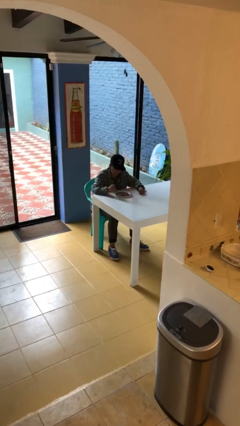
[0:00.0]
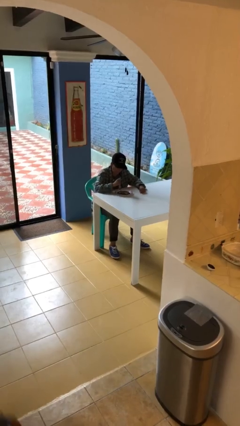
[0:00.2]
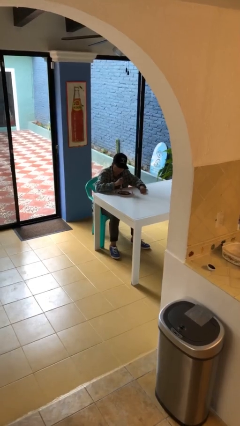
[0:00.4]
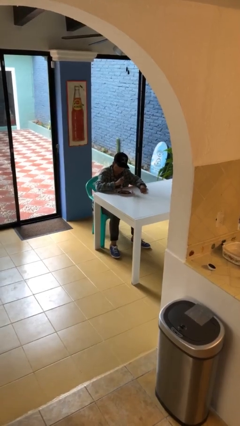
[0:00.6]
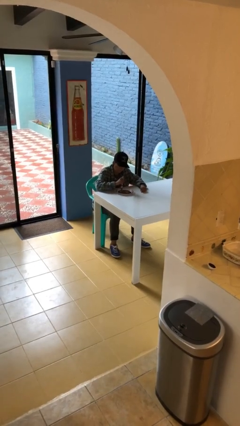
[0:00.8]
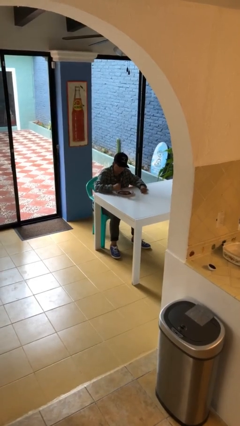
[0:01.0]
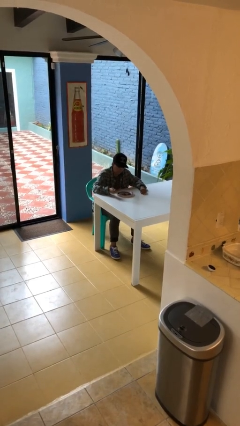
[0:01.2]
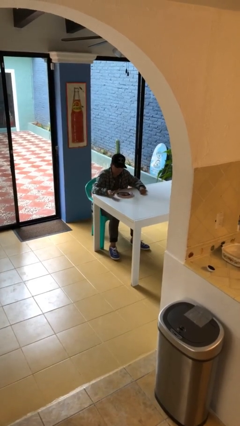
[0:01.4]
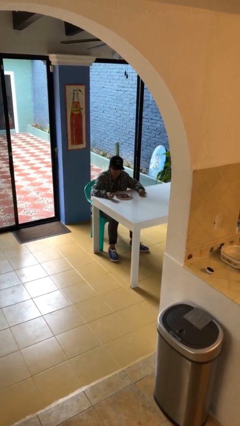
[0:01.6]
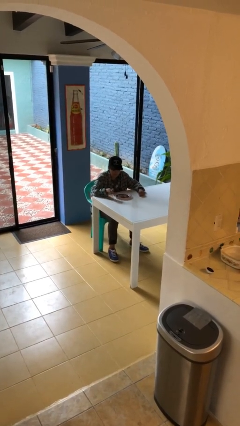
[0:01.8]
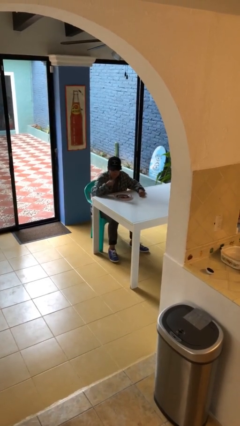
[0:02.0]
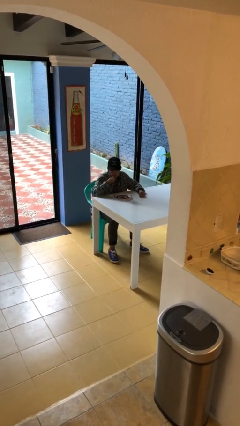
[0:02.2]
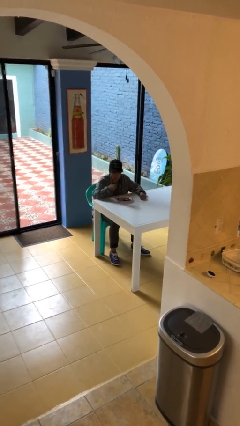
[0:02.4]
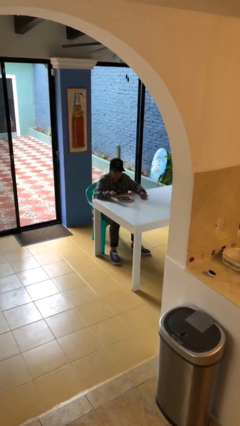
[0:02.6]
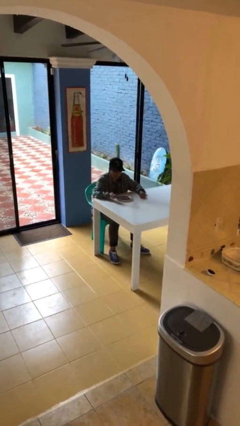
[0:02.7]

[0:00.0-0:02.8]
person eats with utensil

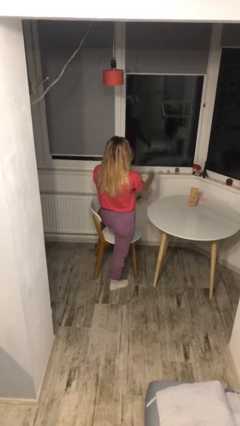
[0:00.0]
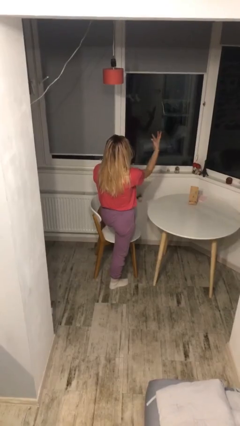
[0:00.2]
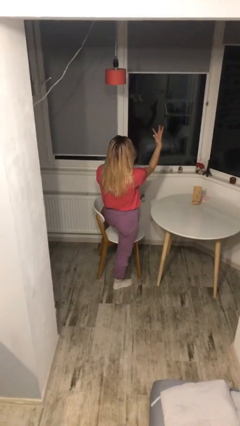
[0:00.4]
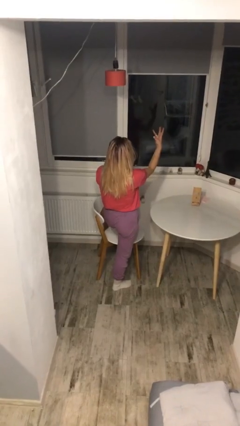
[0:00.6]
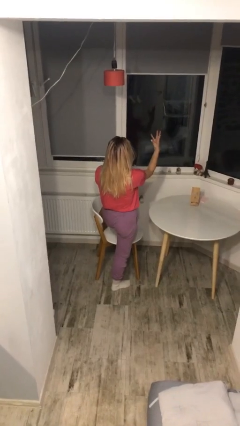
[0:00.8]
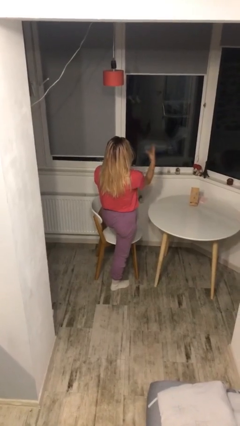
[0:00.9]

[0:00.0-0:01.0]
person gestures number three

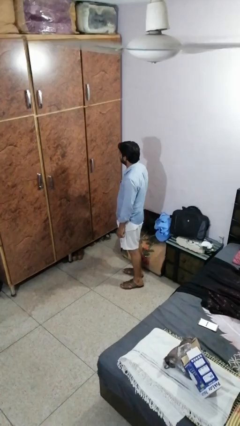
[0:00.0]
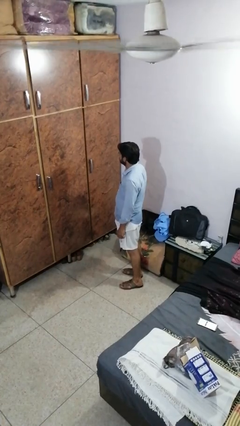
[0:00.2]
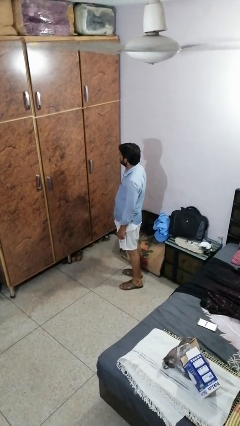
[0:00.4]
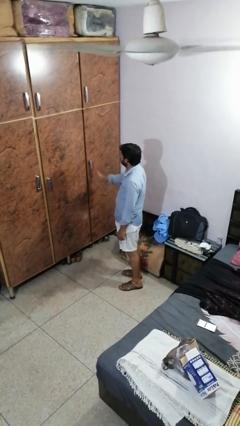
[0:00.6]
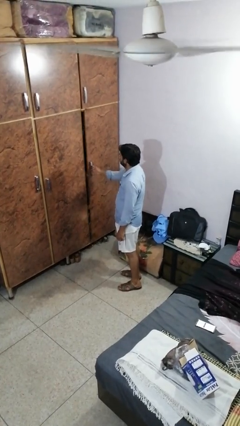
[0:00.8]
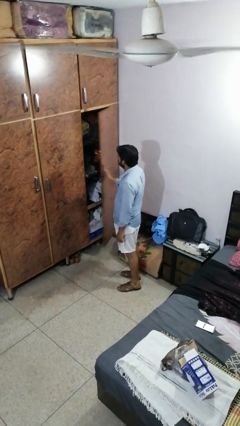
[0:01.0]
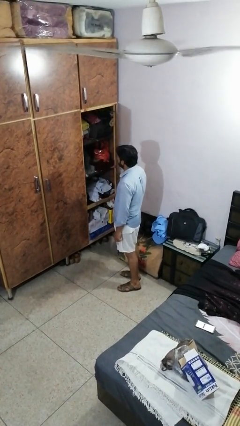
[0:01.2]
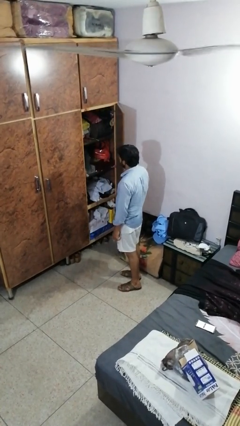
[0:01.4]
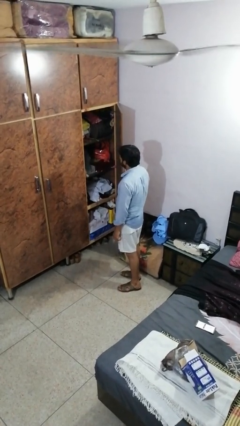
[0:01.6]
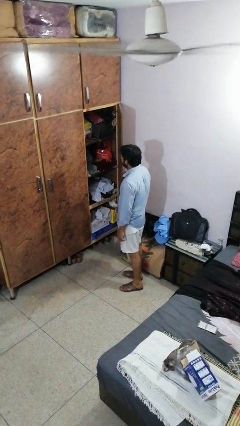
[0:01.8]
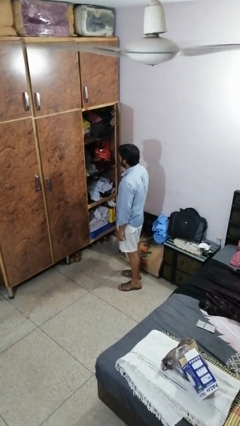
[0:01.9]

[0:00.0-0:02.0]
person opens closet door

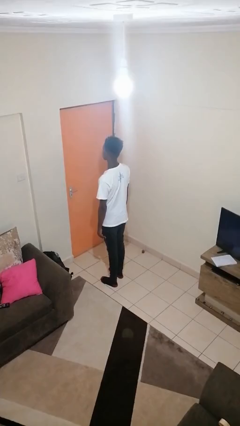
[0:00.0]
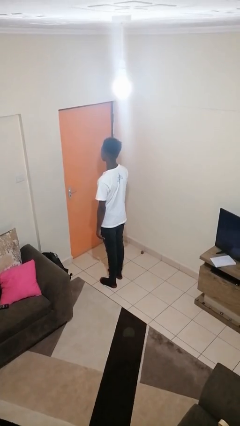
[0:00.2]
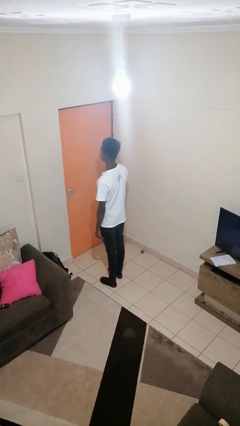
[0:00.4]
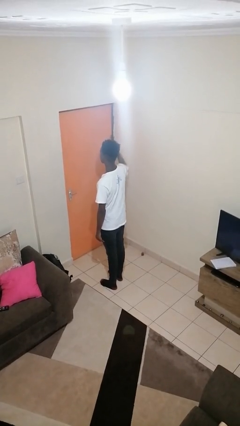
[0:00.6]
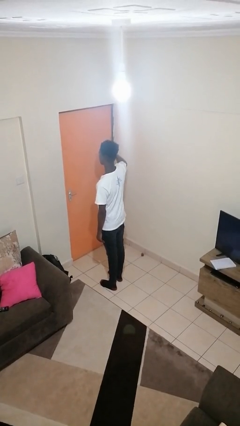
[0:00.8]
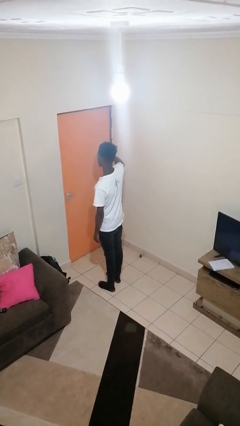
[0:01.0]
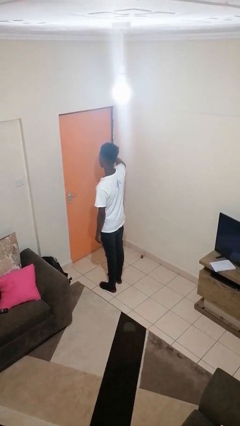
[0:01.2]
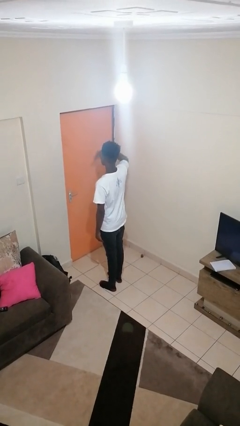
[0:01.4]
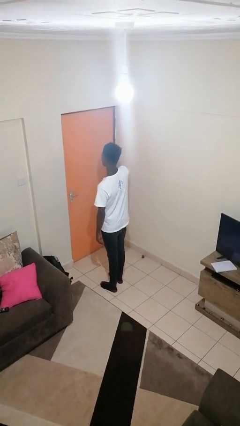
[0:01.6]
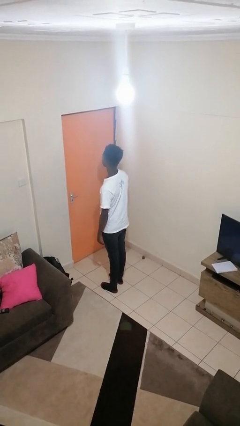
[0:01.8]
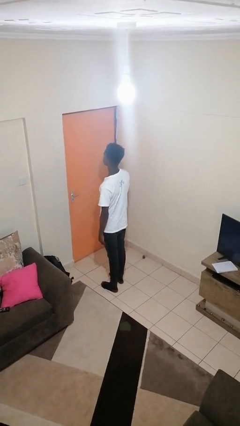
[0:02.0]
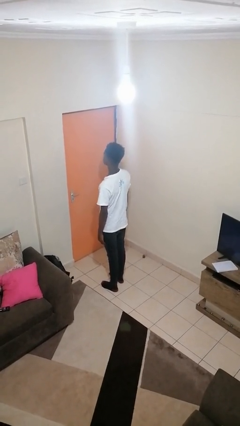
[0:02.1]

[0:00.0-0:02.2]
person salutes

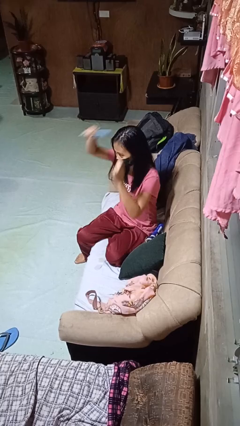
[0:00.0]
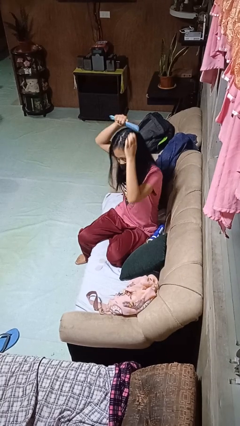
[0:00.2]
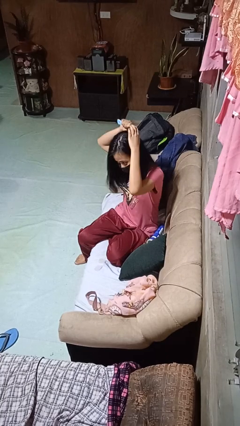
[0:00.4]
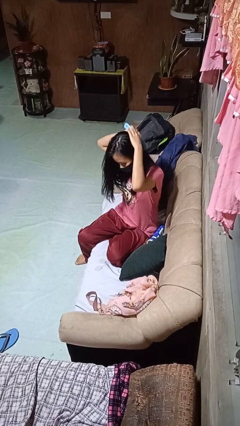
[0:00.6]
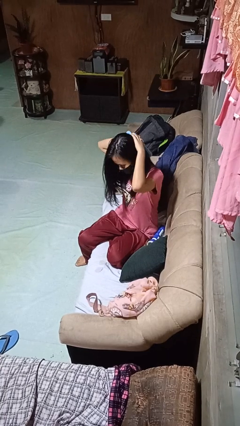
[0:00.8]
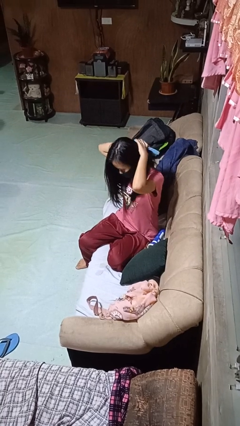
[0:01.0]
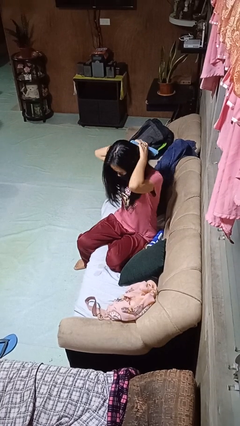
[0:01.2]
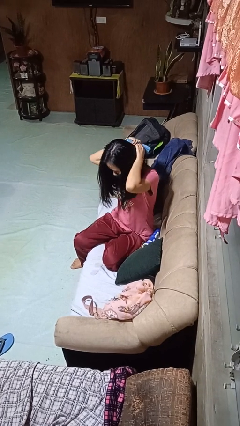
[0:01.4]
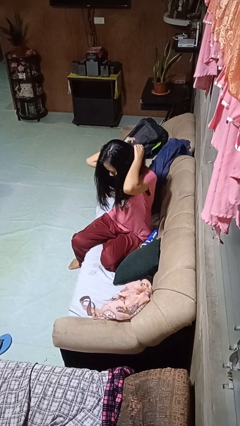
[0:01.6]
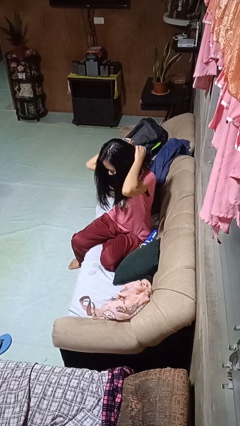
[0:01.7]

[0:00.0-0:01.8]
person brushes hair

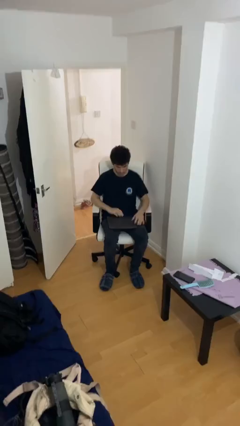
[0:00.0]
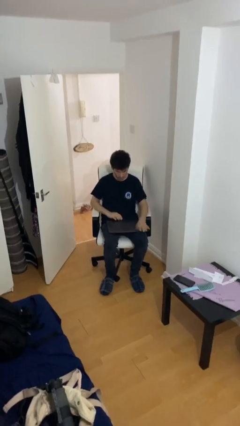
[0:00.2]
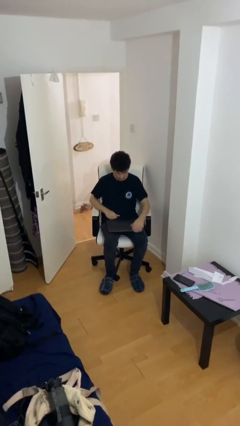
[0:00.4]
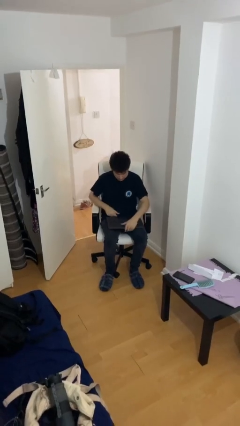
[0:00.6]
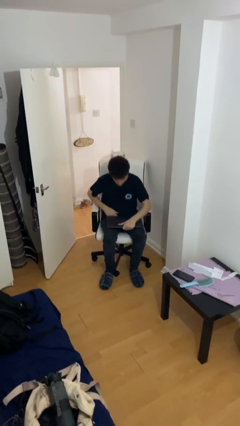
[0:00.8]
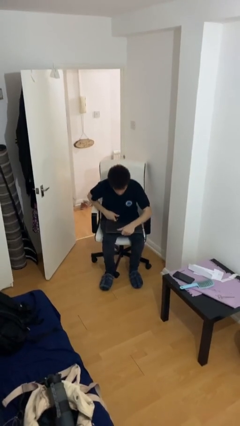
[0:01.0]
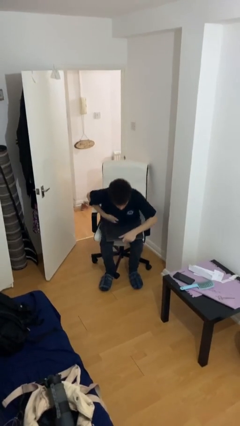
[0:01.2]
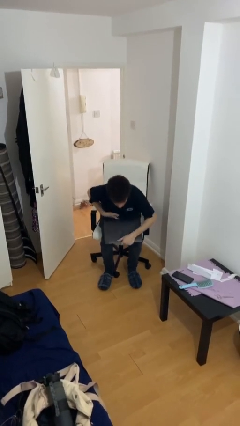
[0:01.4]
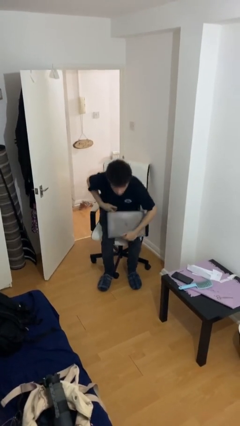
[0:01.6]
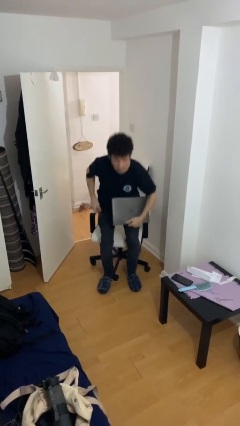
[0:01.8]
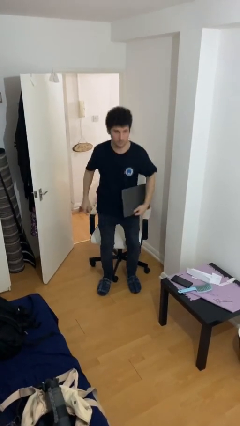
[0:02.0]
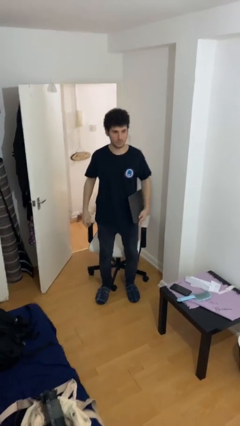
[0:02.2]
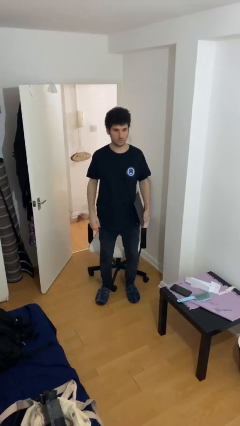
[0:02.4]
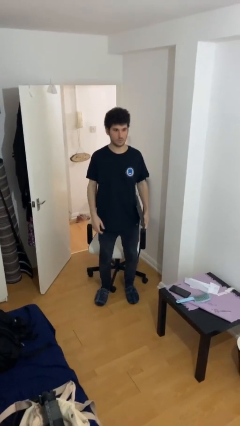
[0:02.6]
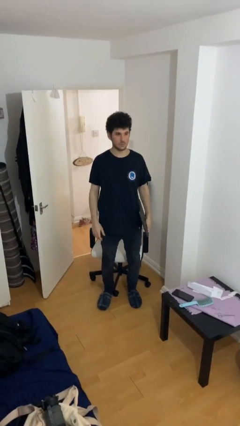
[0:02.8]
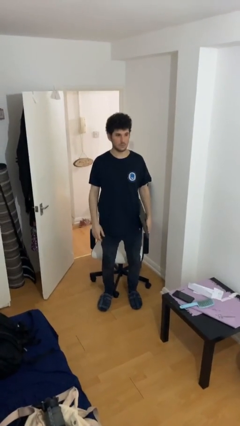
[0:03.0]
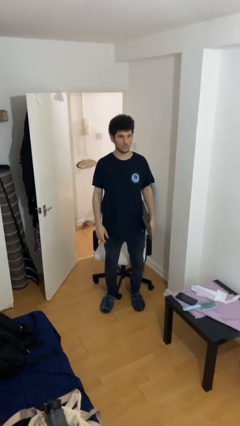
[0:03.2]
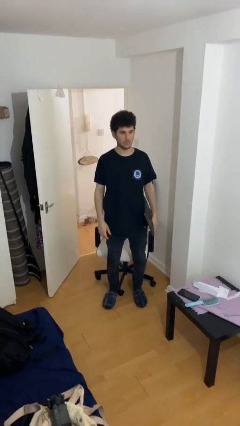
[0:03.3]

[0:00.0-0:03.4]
person stands up

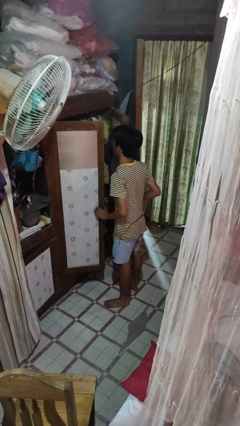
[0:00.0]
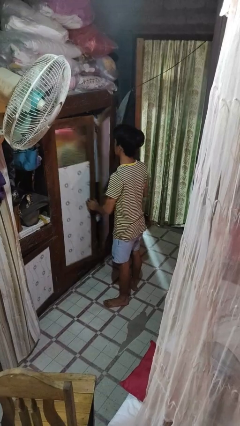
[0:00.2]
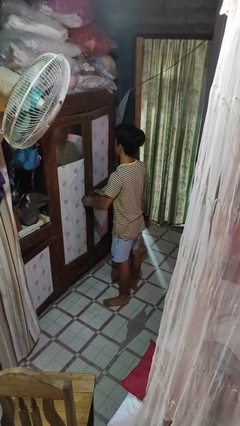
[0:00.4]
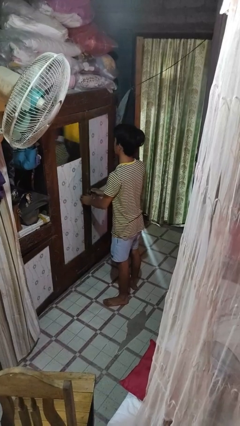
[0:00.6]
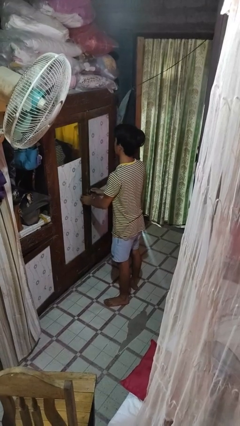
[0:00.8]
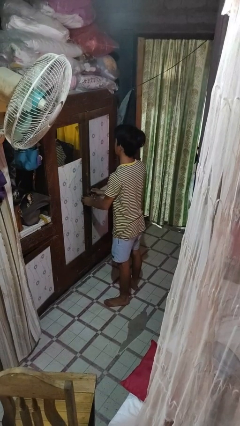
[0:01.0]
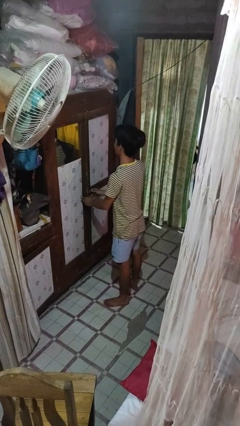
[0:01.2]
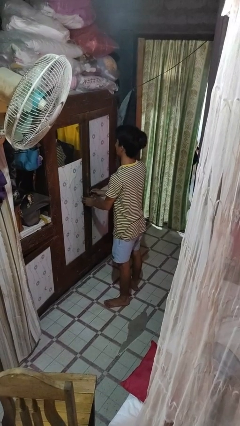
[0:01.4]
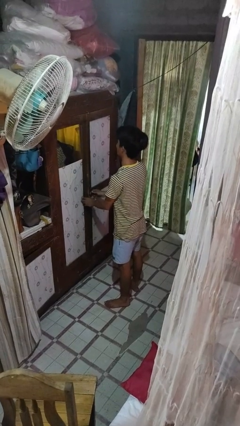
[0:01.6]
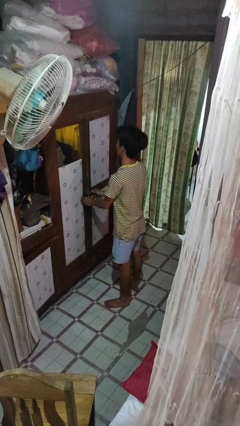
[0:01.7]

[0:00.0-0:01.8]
person closes closet door

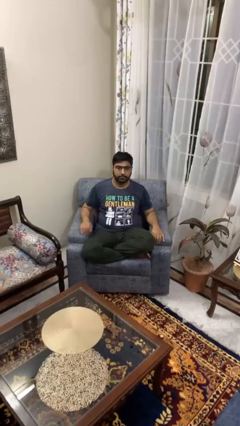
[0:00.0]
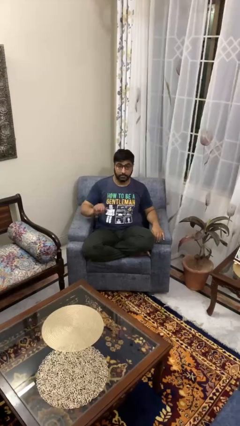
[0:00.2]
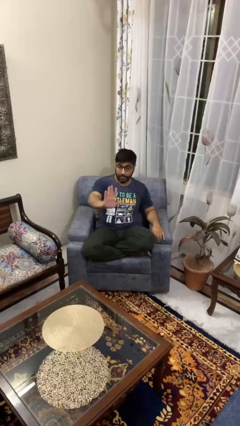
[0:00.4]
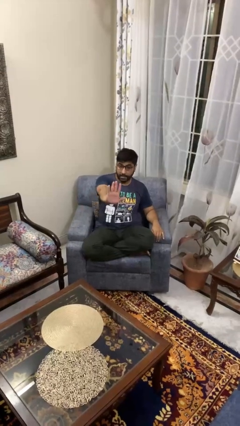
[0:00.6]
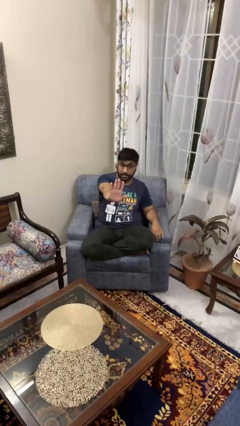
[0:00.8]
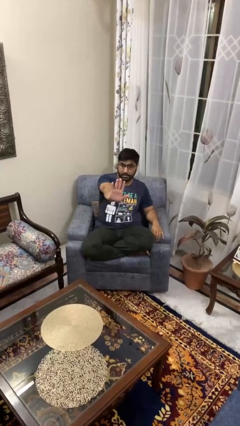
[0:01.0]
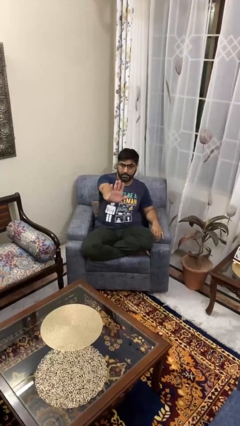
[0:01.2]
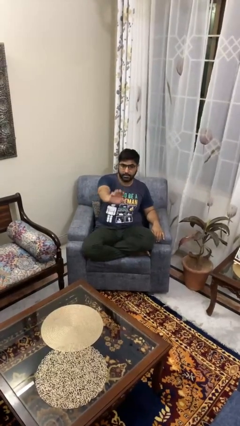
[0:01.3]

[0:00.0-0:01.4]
person gestures stop

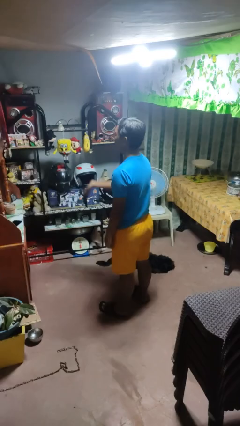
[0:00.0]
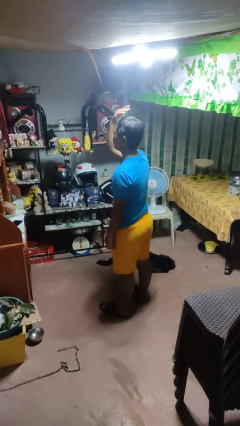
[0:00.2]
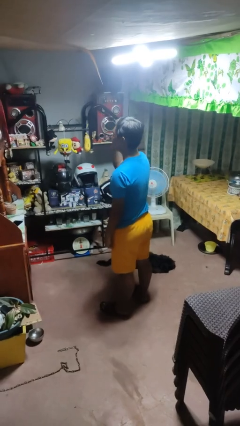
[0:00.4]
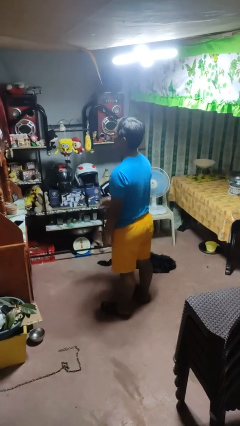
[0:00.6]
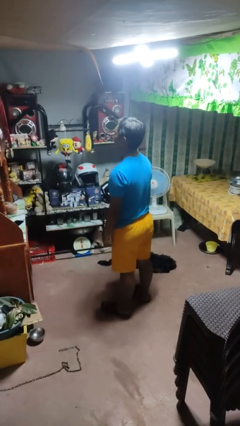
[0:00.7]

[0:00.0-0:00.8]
person gestures swipe up
